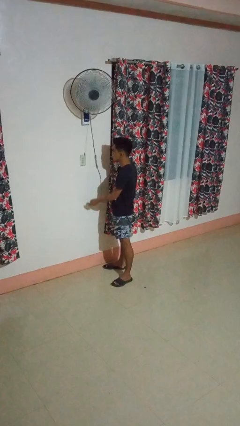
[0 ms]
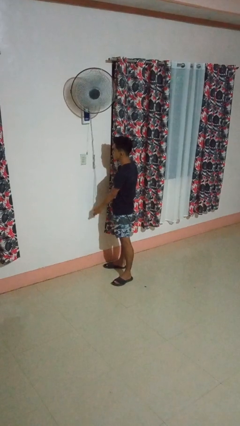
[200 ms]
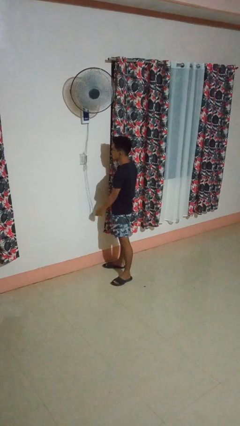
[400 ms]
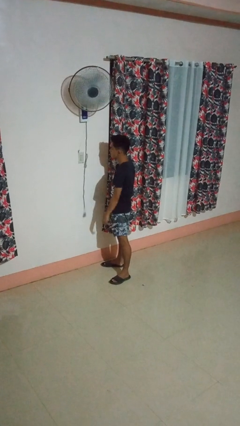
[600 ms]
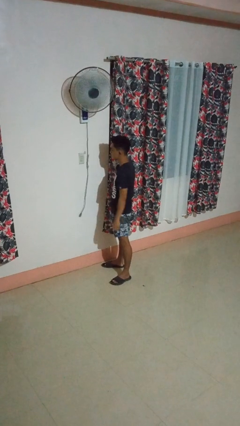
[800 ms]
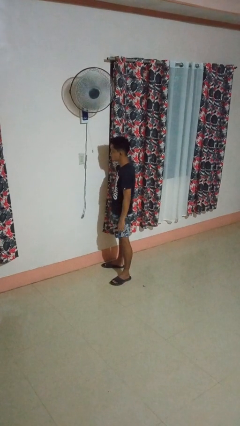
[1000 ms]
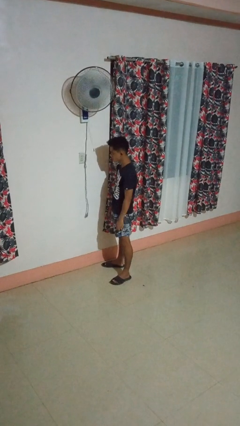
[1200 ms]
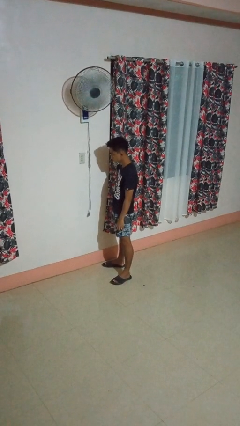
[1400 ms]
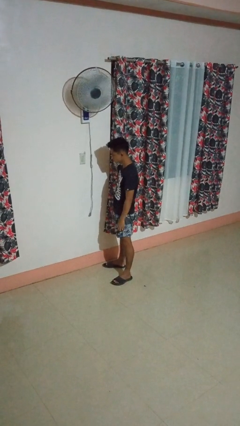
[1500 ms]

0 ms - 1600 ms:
person unplugs from electrical socket

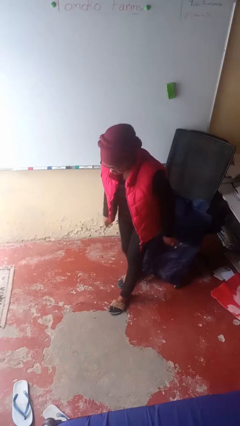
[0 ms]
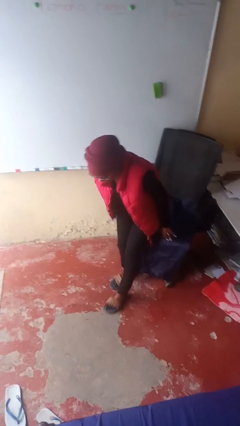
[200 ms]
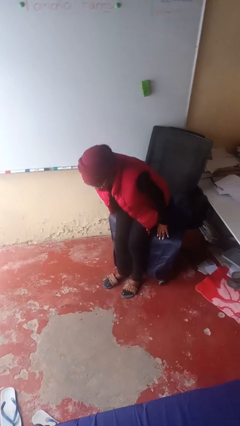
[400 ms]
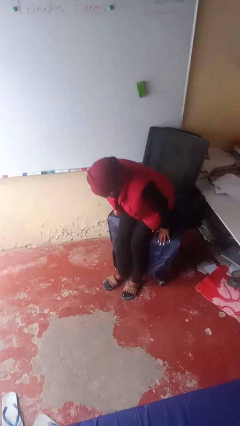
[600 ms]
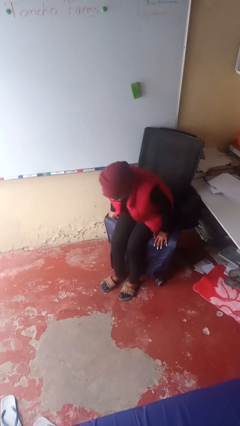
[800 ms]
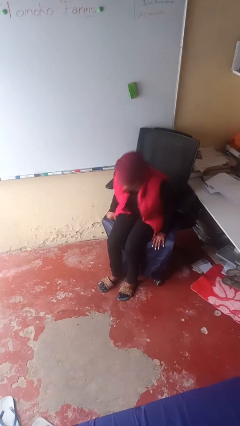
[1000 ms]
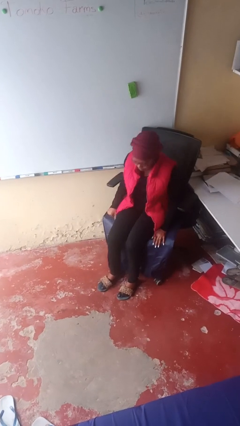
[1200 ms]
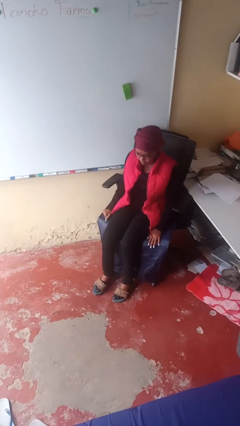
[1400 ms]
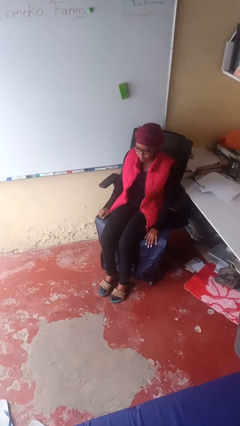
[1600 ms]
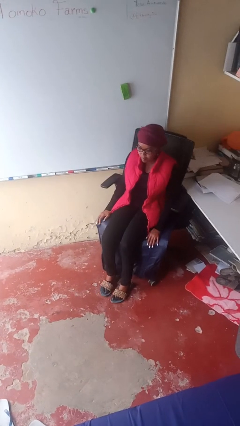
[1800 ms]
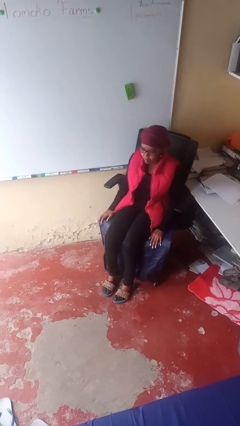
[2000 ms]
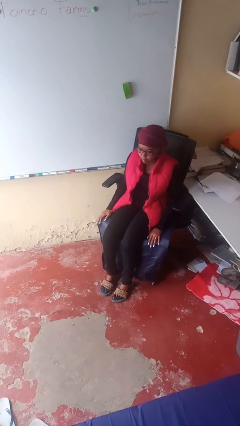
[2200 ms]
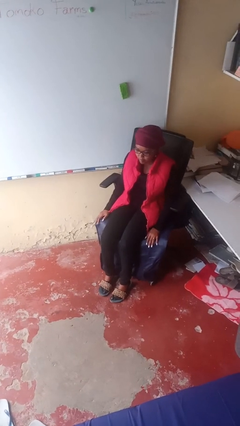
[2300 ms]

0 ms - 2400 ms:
person sits down

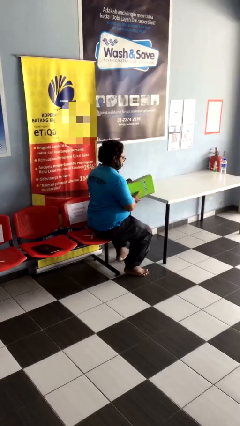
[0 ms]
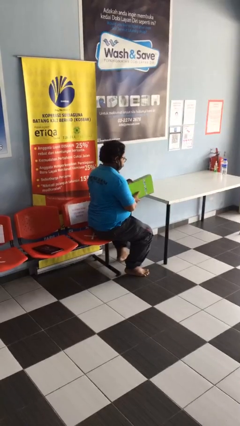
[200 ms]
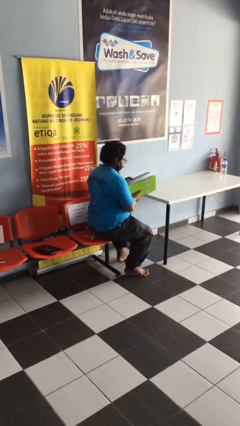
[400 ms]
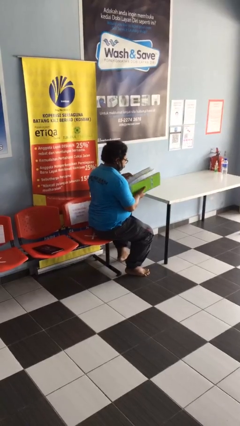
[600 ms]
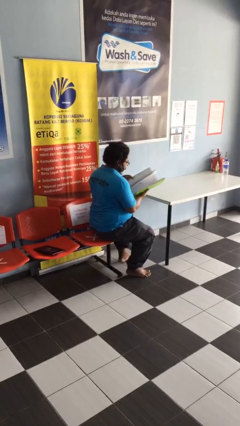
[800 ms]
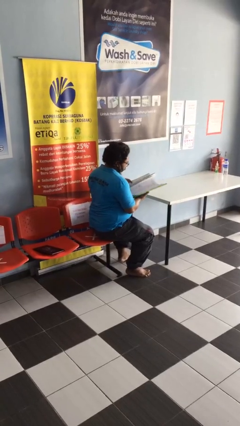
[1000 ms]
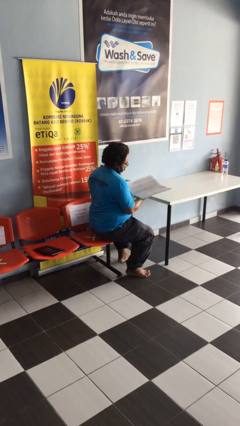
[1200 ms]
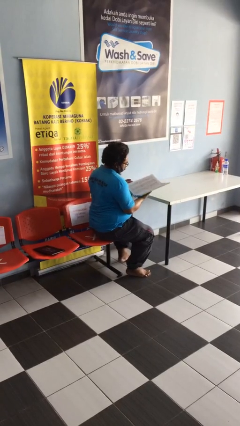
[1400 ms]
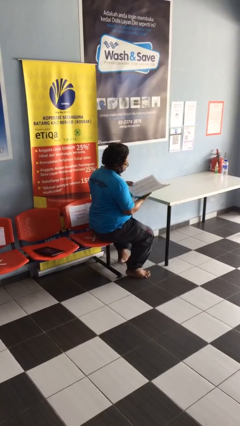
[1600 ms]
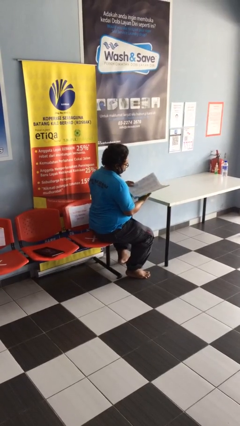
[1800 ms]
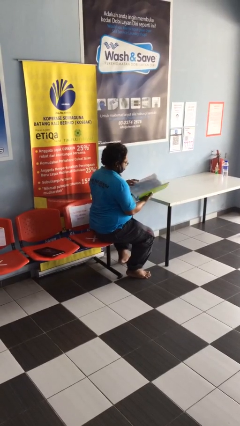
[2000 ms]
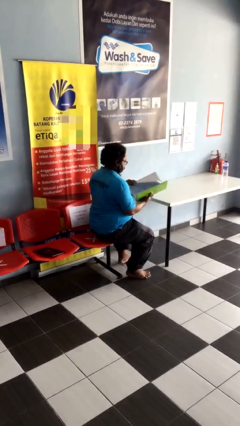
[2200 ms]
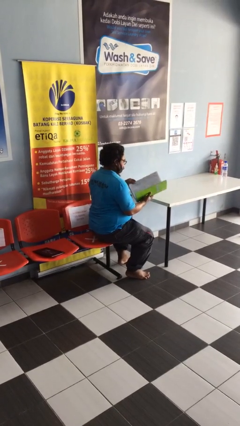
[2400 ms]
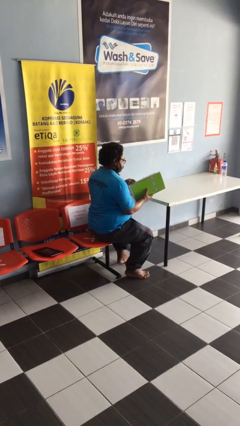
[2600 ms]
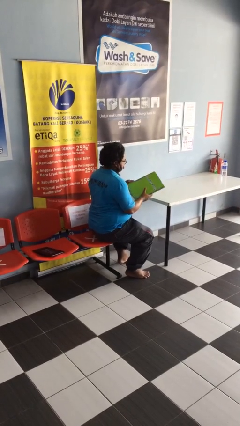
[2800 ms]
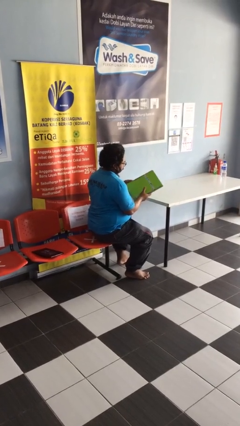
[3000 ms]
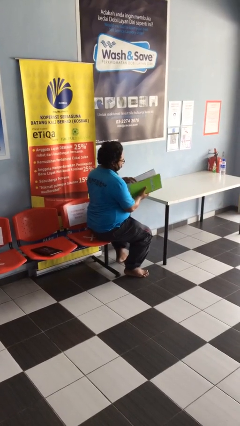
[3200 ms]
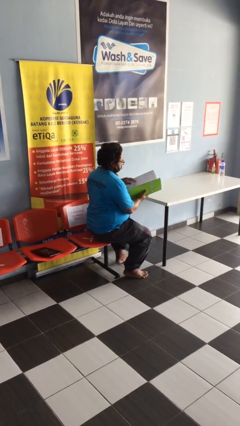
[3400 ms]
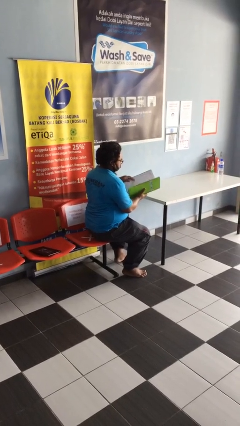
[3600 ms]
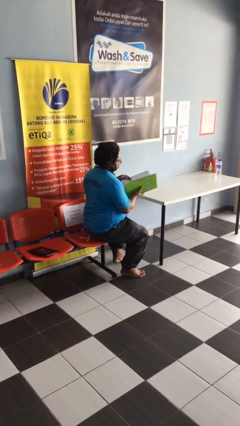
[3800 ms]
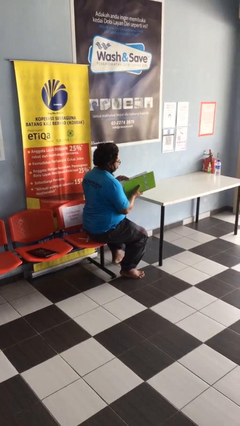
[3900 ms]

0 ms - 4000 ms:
person reads document

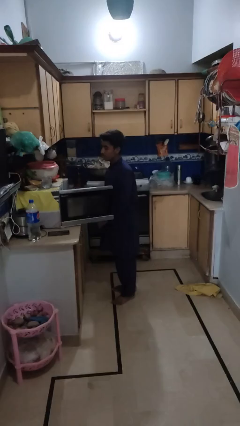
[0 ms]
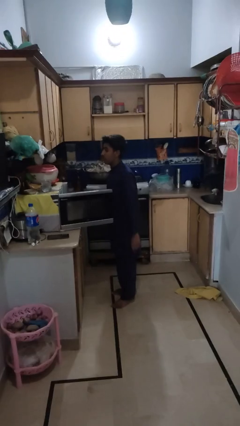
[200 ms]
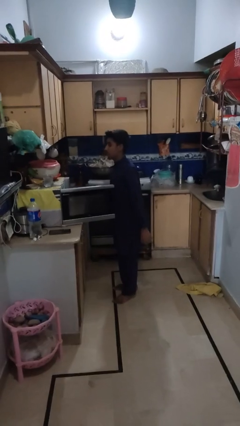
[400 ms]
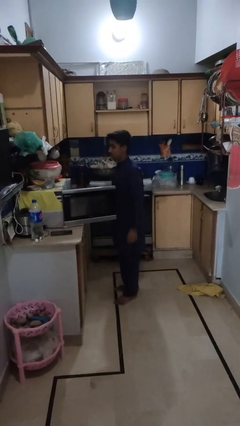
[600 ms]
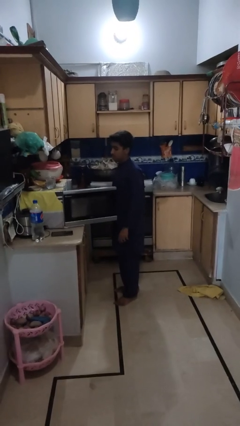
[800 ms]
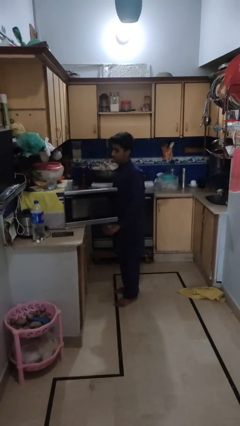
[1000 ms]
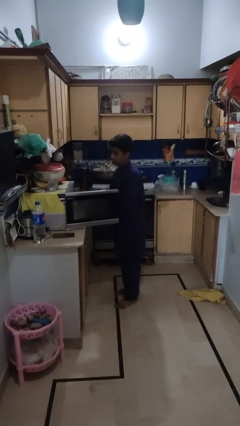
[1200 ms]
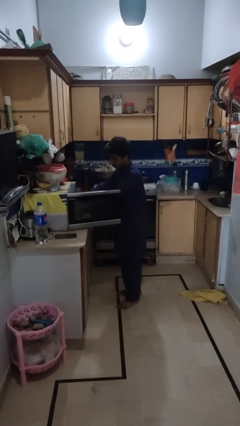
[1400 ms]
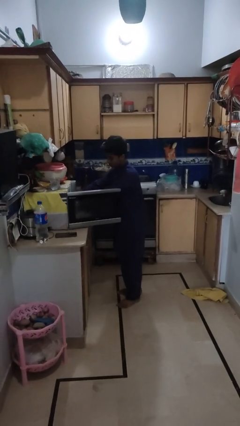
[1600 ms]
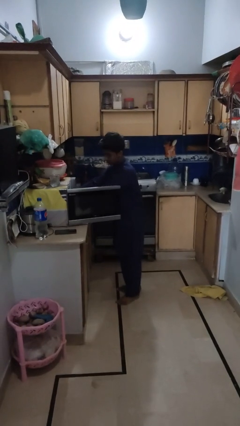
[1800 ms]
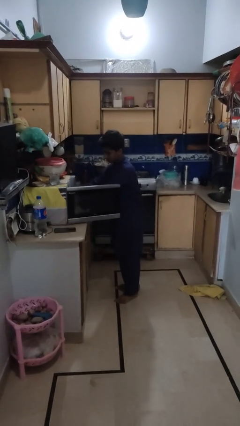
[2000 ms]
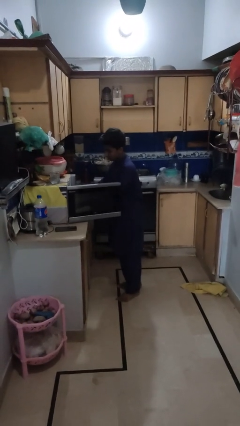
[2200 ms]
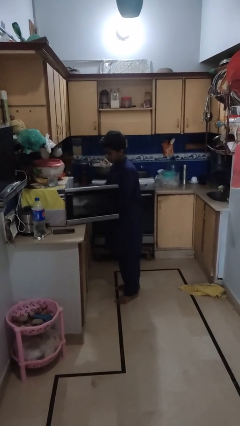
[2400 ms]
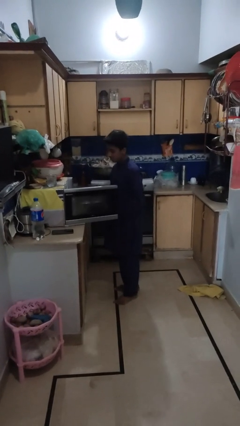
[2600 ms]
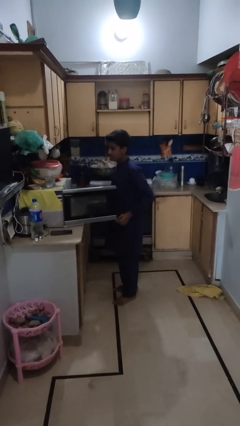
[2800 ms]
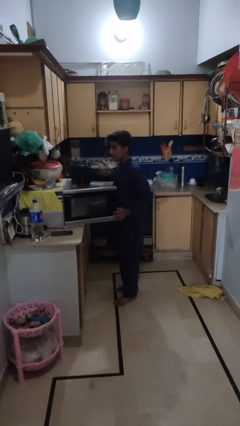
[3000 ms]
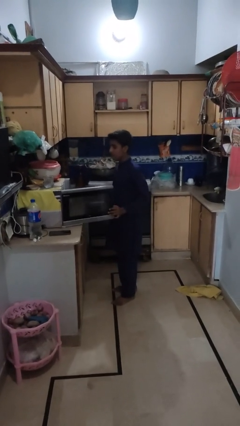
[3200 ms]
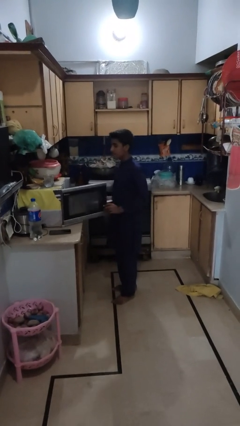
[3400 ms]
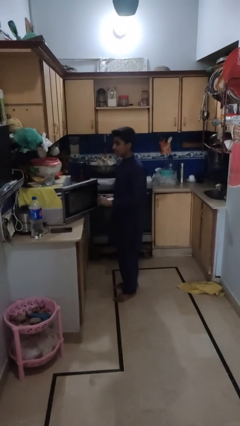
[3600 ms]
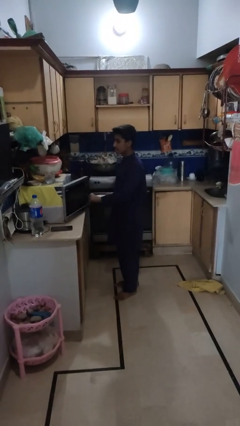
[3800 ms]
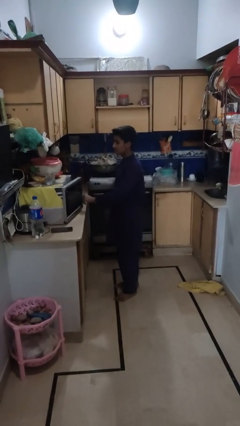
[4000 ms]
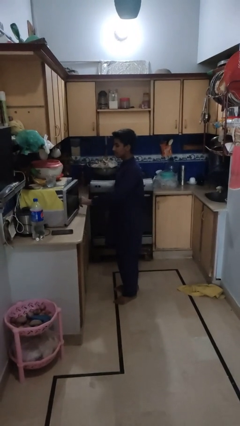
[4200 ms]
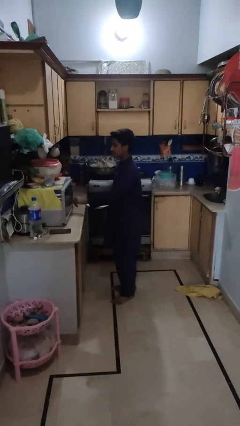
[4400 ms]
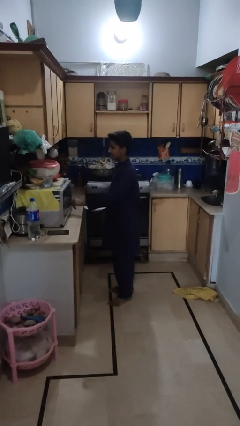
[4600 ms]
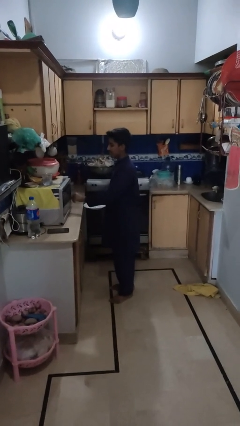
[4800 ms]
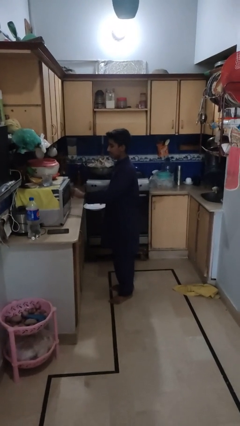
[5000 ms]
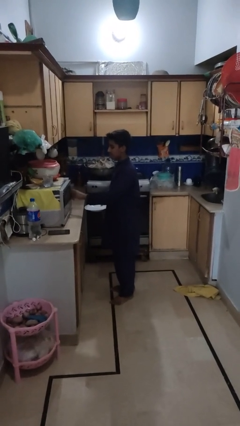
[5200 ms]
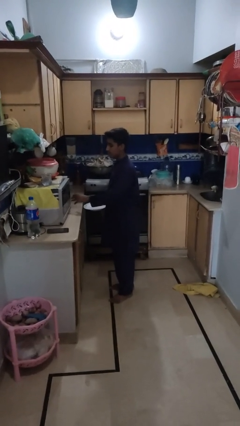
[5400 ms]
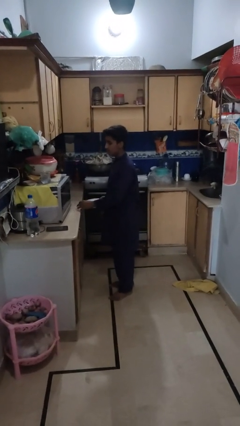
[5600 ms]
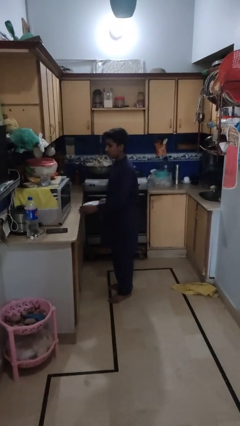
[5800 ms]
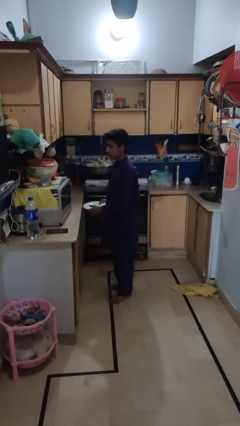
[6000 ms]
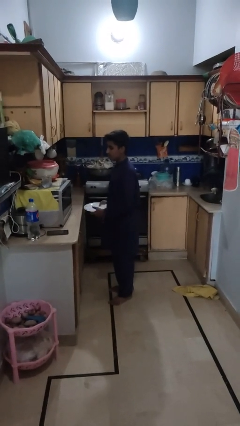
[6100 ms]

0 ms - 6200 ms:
person takes object from microwave

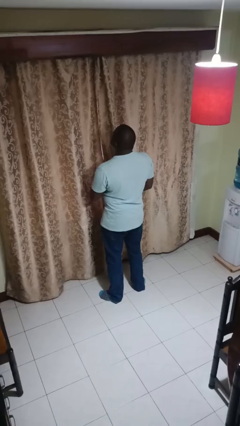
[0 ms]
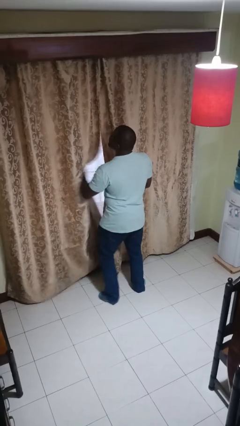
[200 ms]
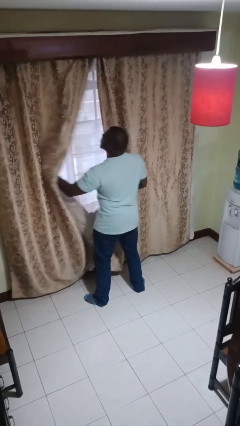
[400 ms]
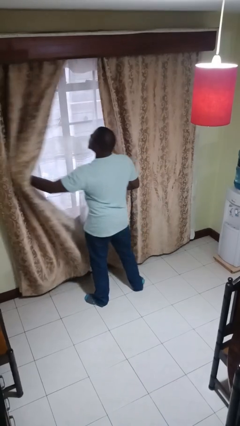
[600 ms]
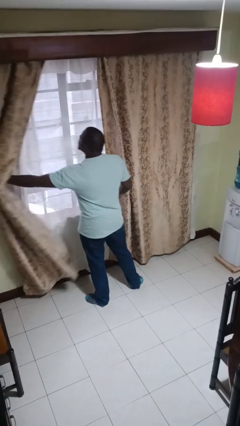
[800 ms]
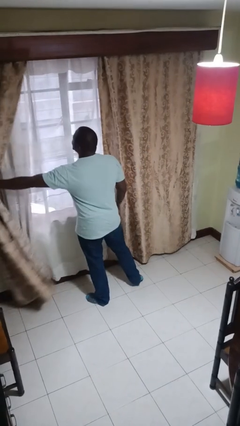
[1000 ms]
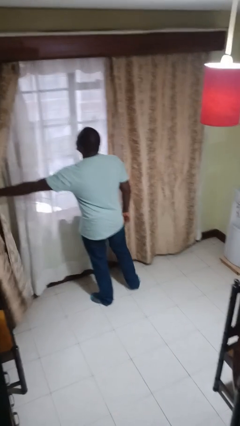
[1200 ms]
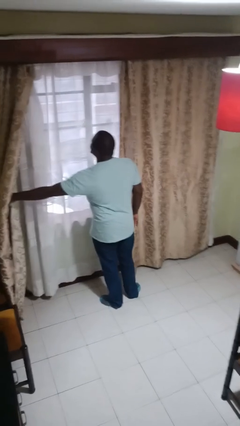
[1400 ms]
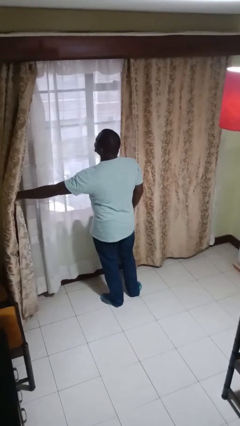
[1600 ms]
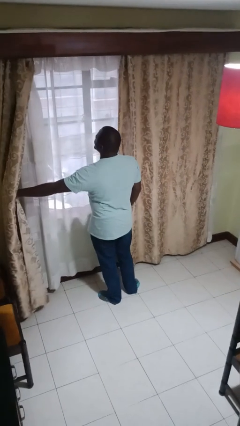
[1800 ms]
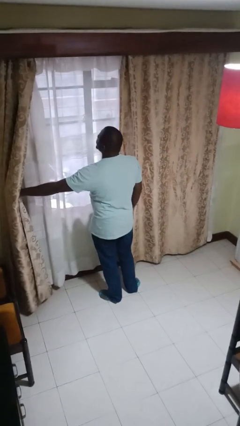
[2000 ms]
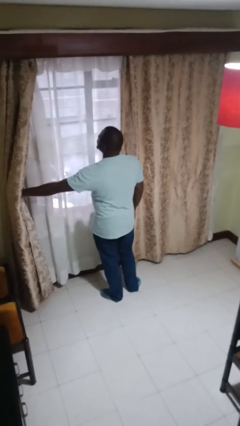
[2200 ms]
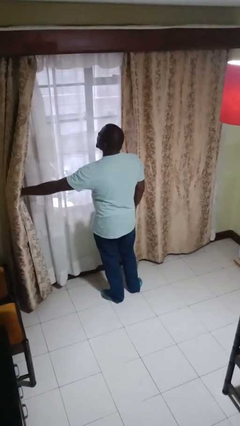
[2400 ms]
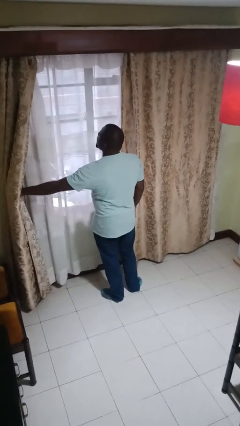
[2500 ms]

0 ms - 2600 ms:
person opens curtains

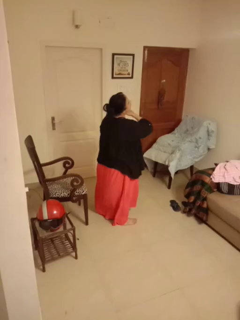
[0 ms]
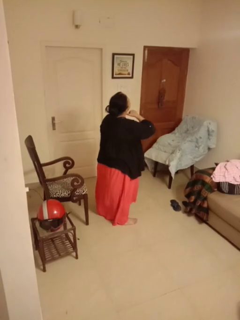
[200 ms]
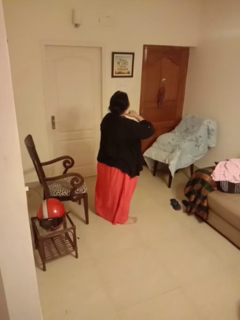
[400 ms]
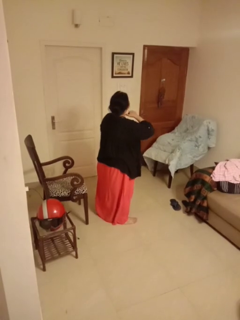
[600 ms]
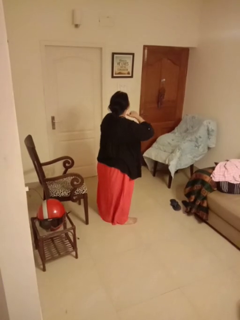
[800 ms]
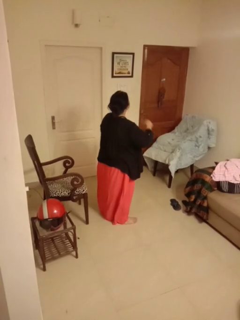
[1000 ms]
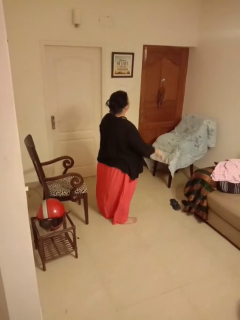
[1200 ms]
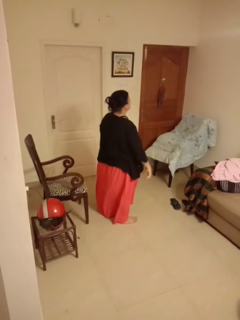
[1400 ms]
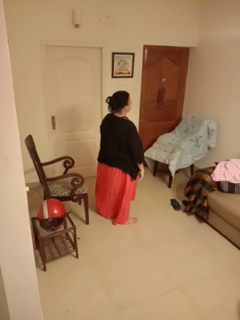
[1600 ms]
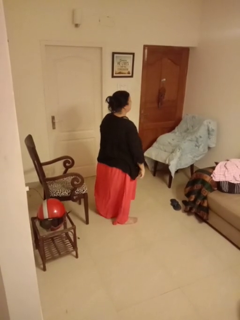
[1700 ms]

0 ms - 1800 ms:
person gestures cut
